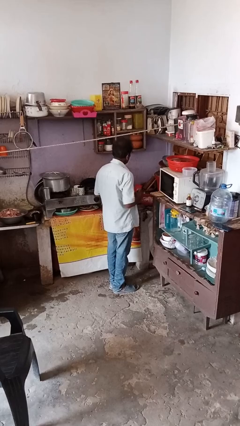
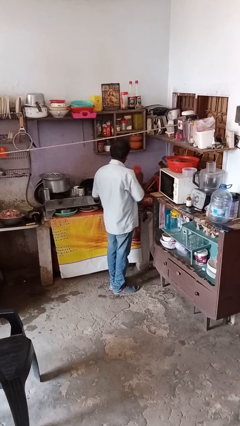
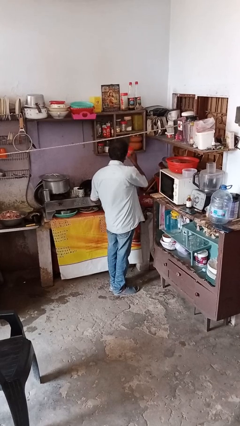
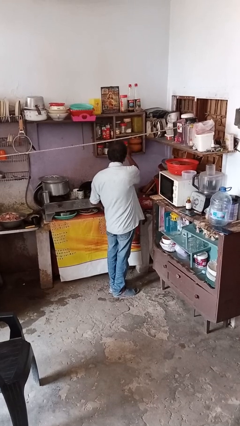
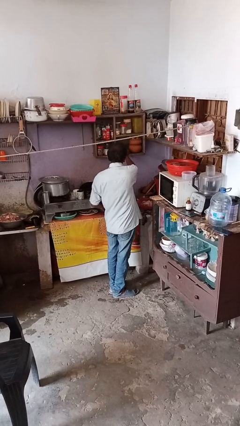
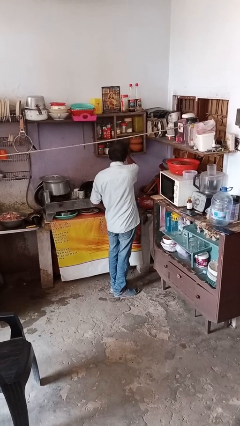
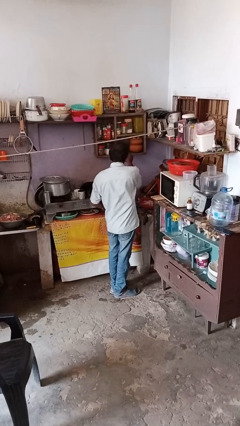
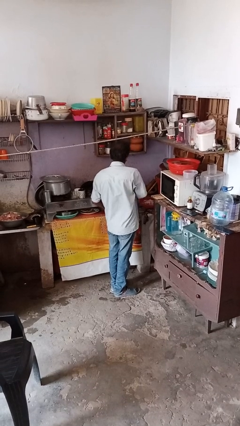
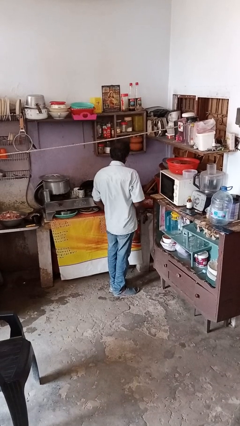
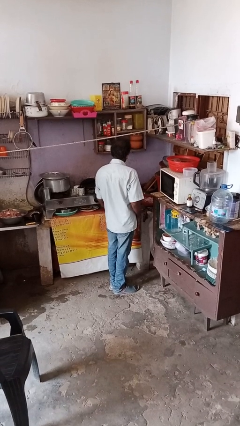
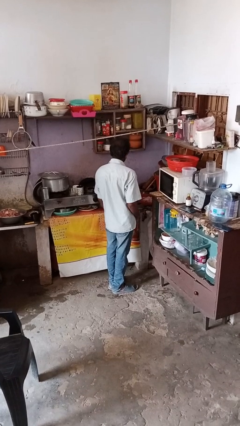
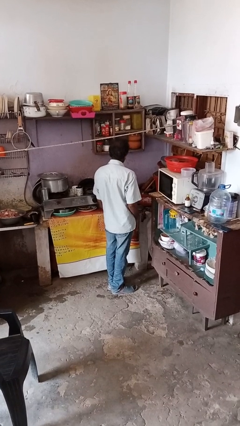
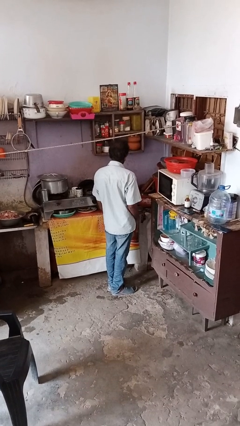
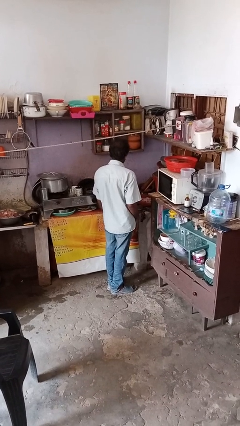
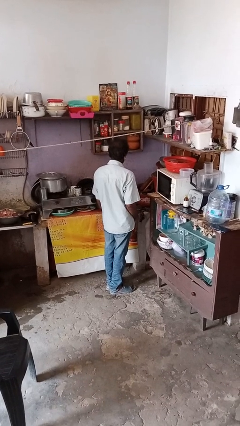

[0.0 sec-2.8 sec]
person puts down object on shelf

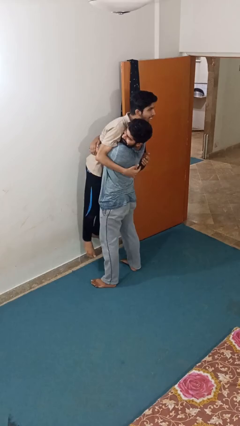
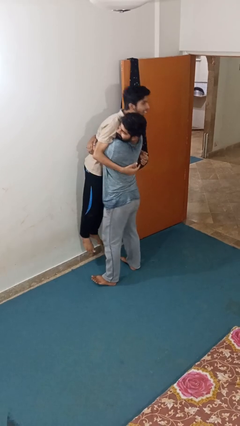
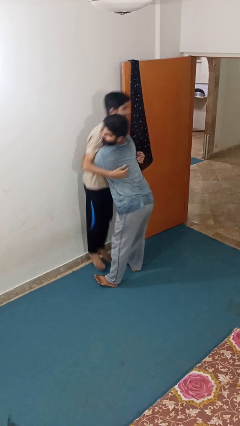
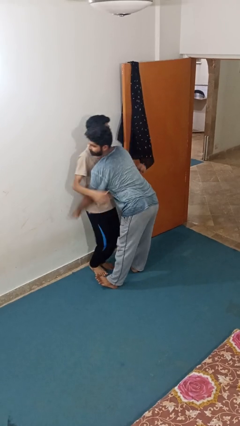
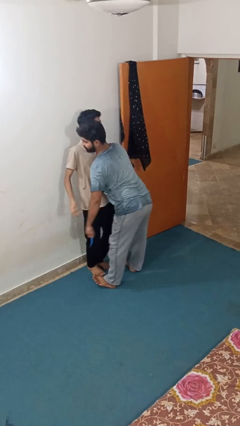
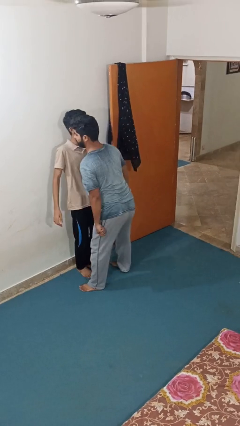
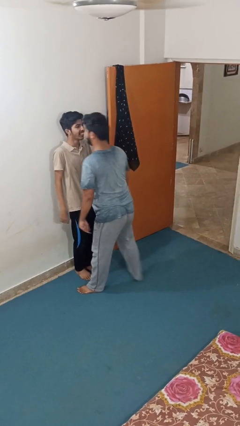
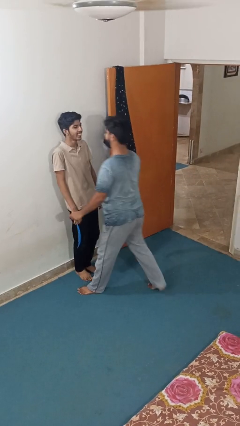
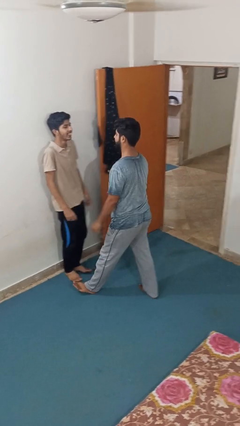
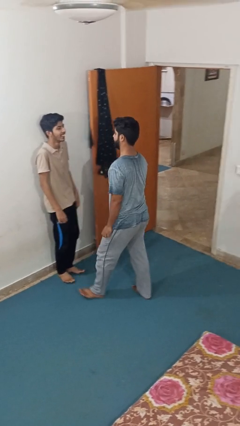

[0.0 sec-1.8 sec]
person puts down person

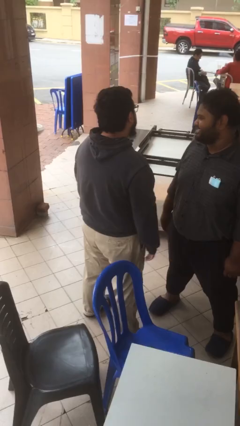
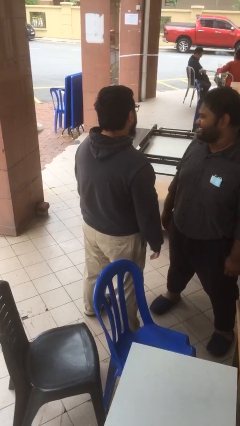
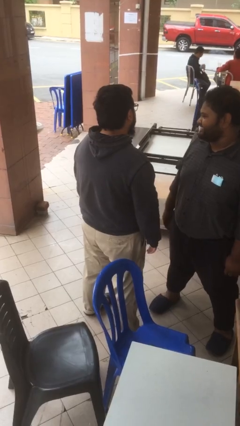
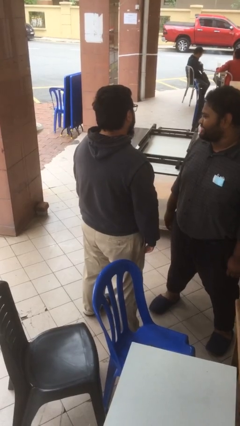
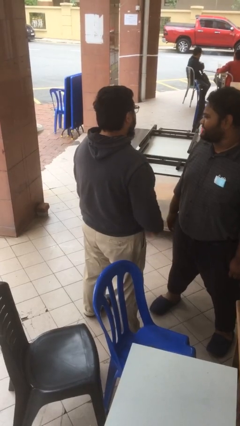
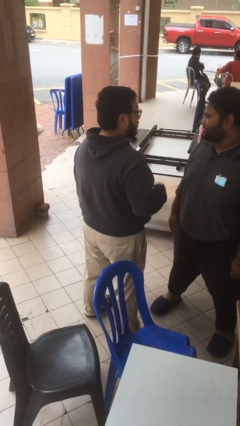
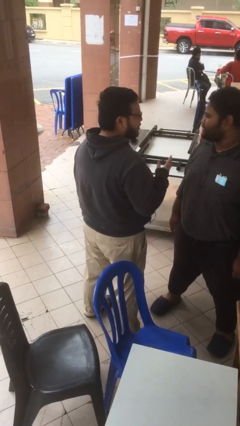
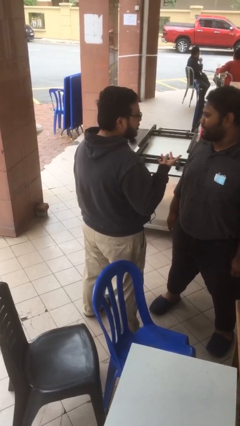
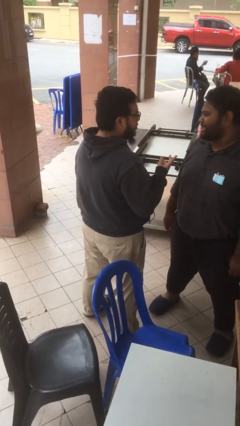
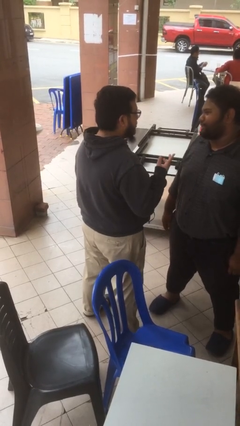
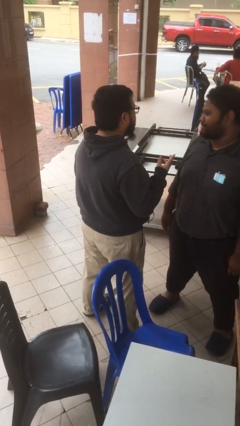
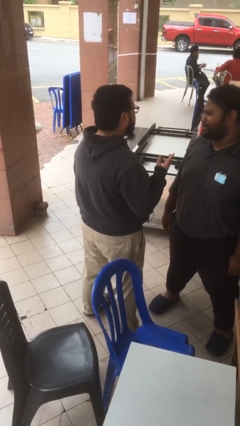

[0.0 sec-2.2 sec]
person talks to person

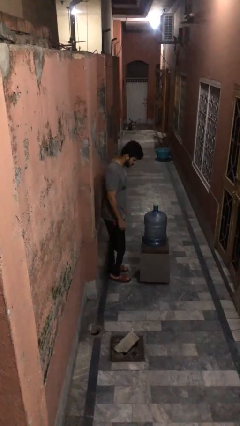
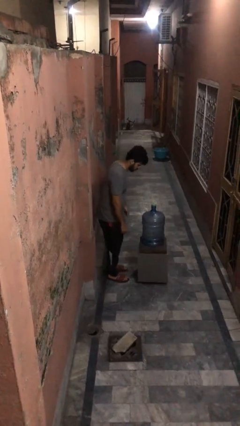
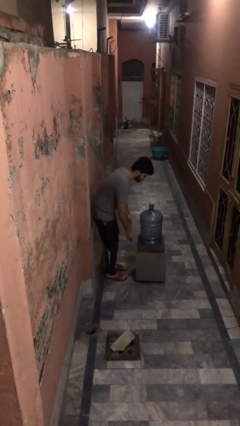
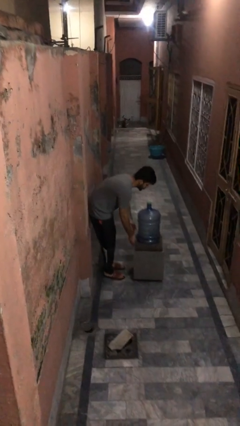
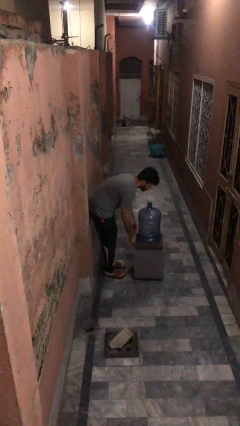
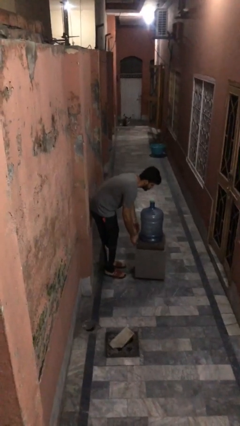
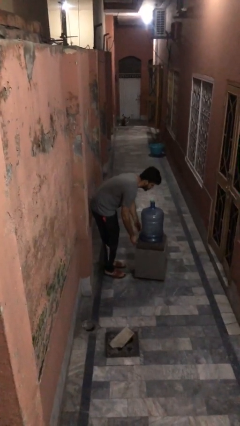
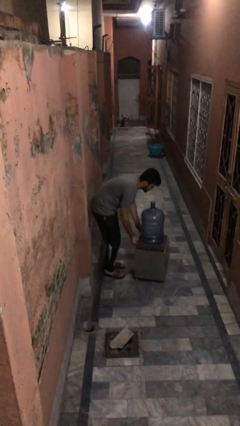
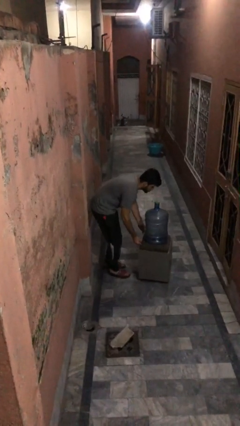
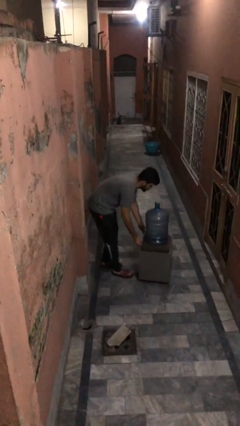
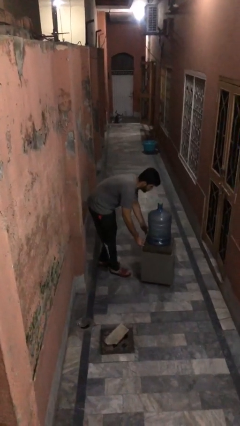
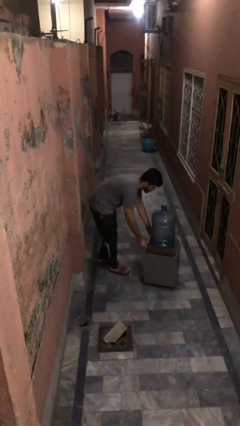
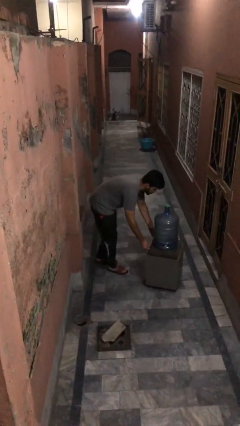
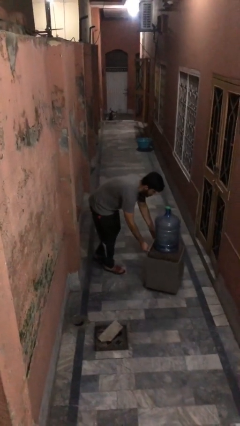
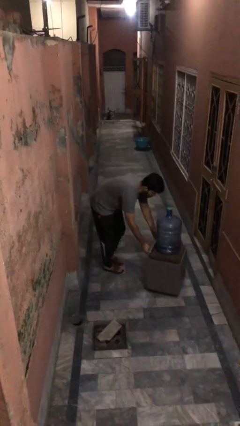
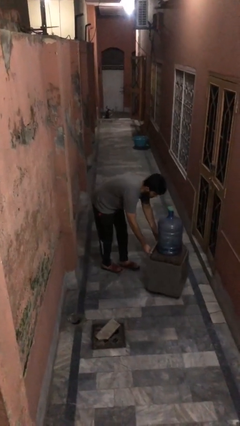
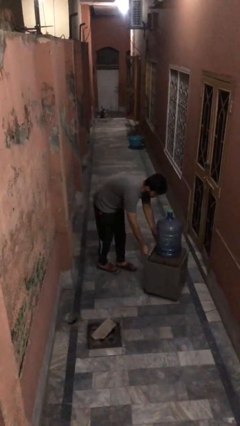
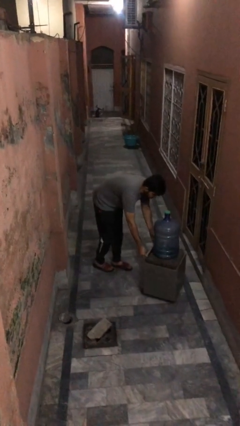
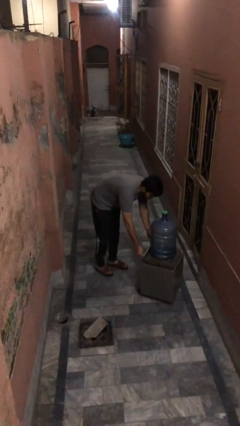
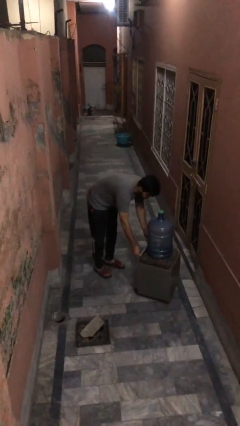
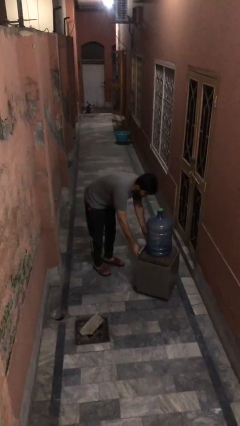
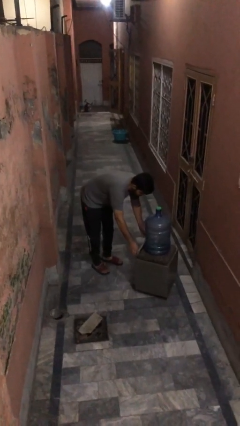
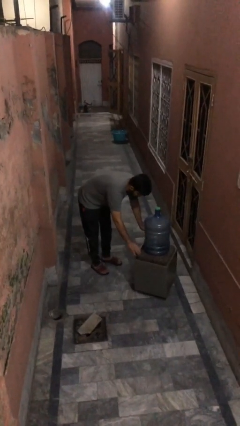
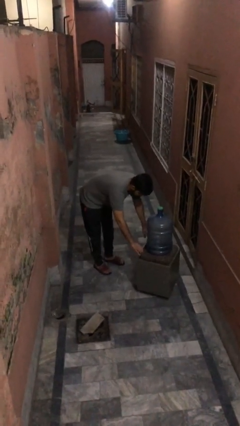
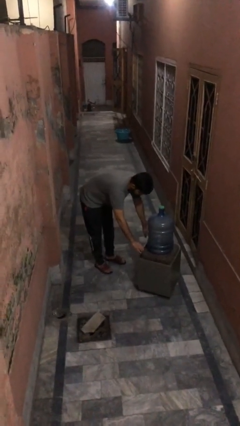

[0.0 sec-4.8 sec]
person pushes wheeled cart

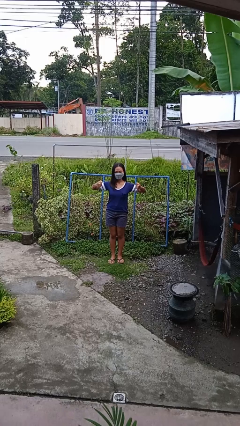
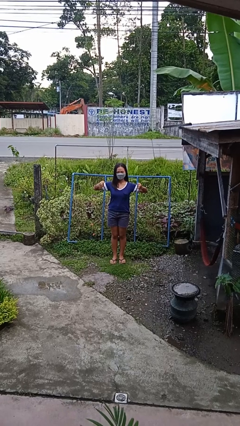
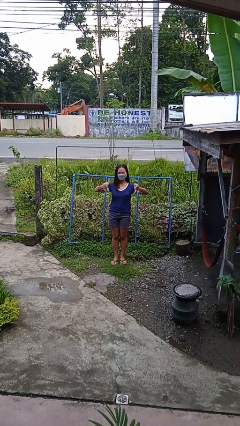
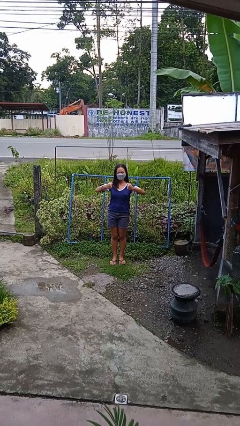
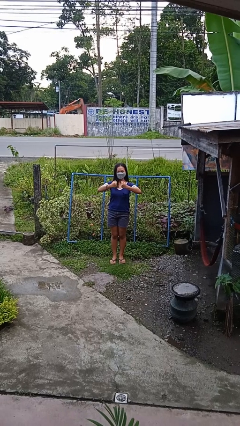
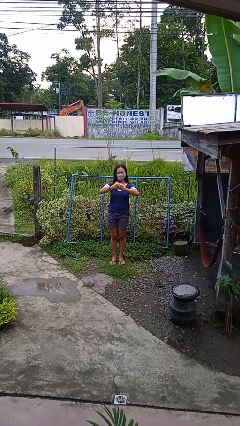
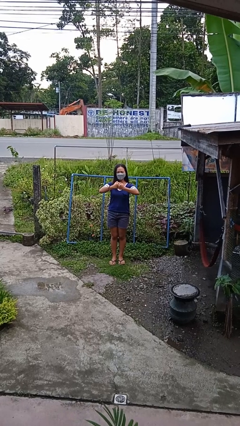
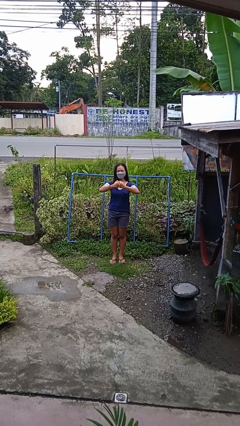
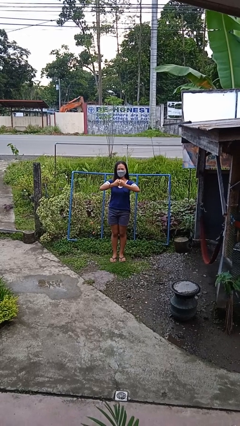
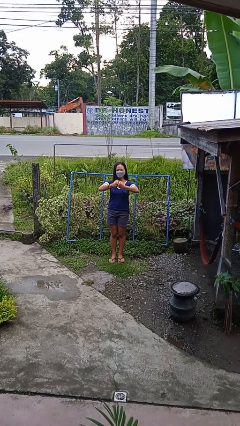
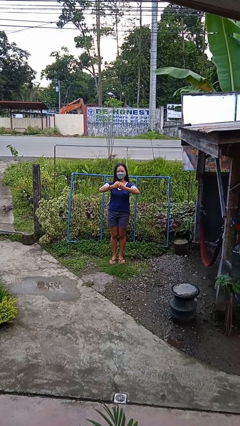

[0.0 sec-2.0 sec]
person gestures zoom out

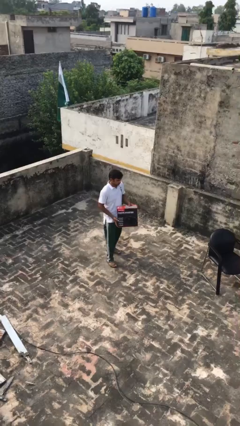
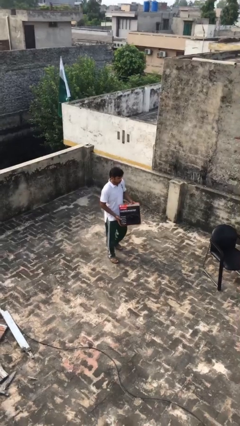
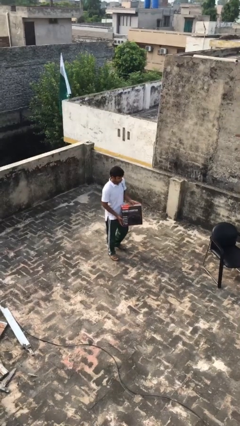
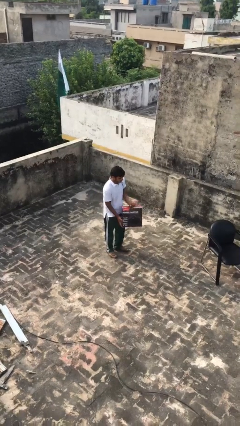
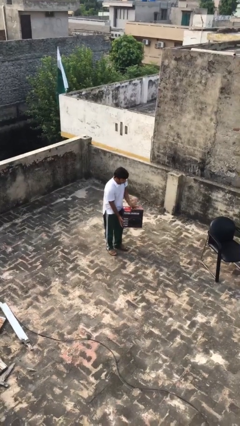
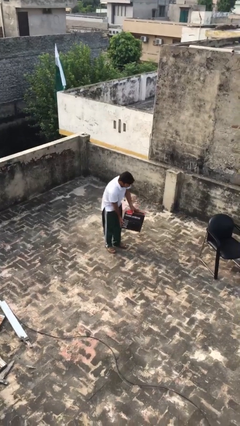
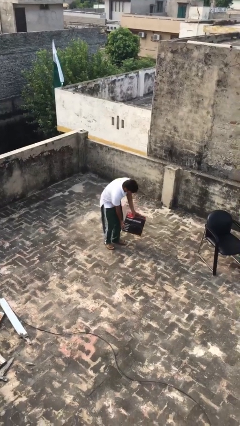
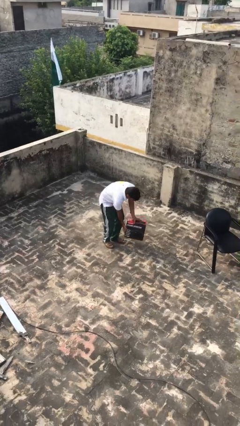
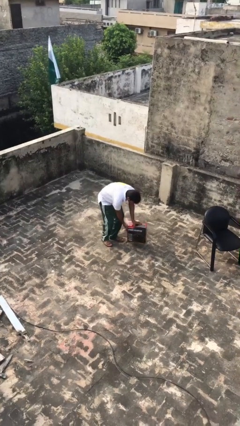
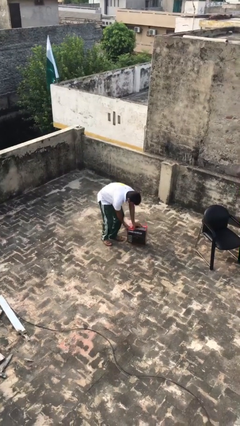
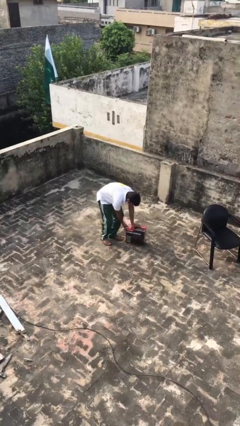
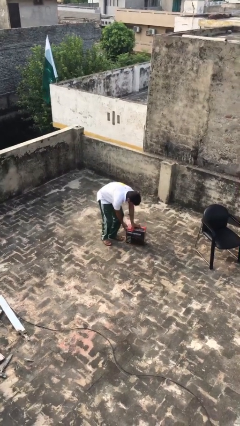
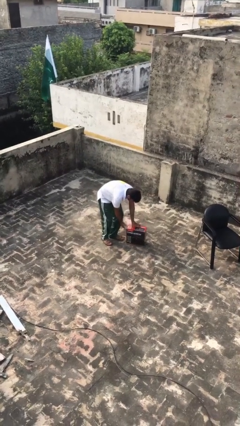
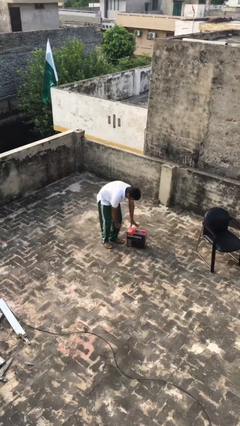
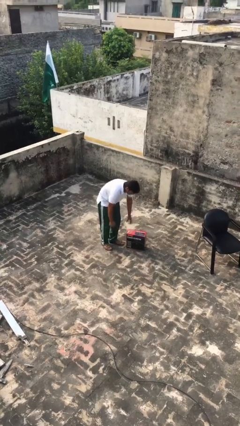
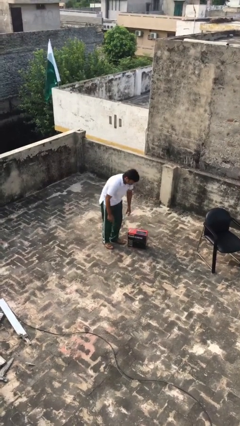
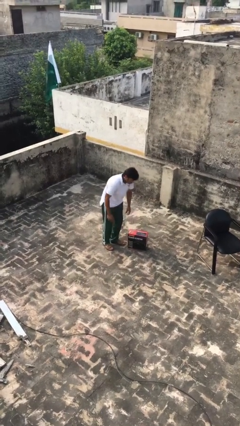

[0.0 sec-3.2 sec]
person puts down object on floor

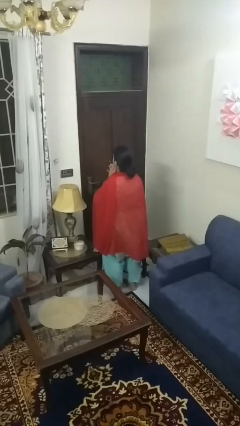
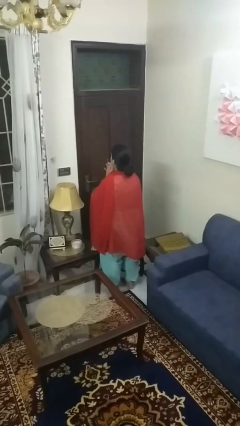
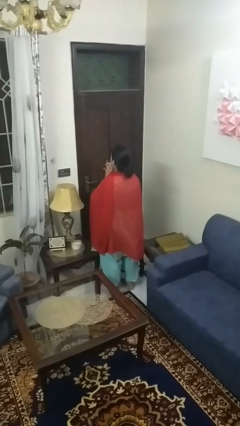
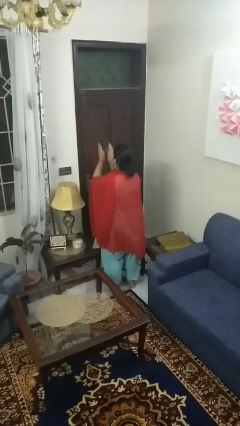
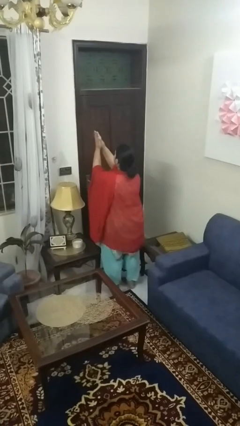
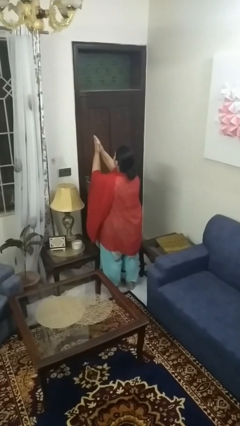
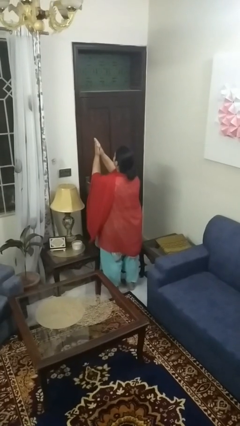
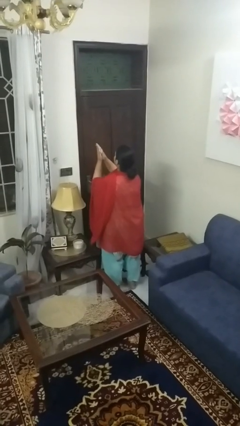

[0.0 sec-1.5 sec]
person swats bug
